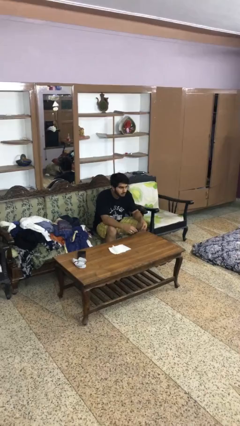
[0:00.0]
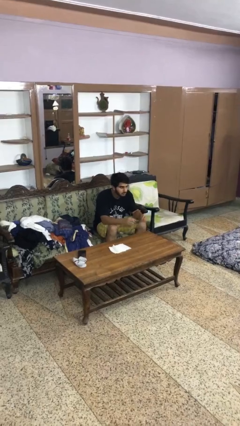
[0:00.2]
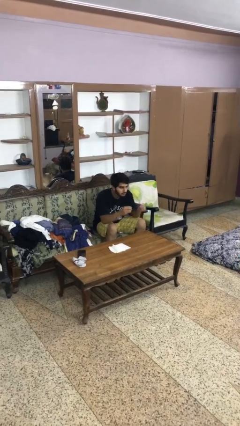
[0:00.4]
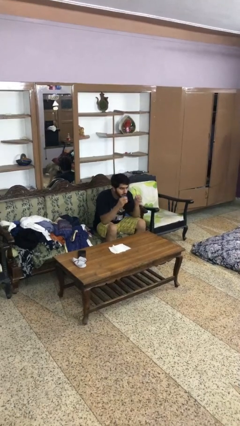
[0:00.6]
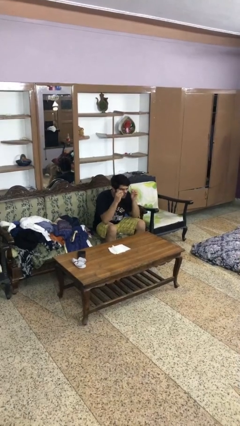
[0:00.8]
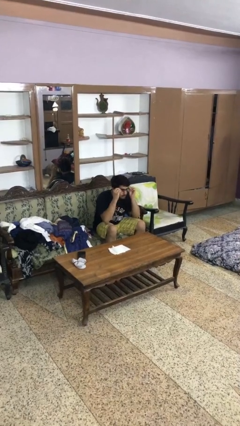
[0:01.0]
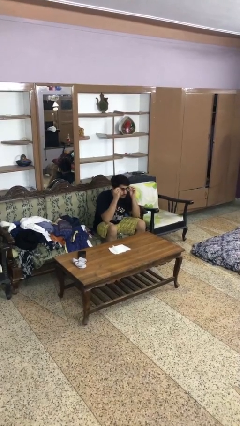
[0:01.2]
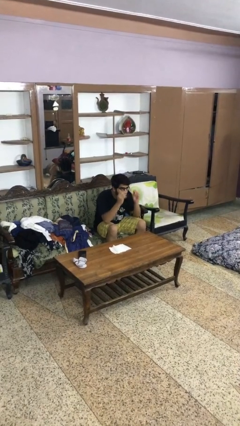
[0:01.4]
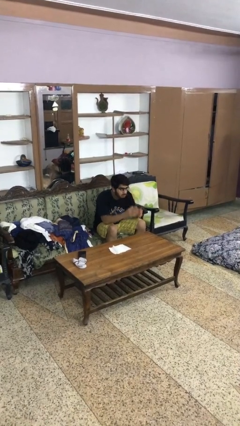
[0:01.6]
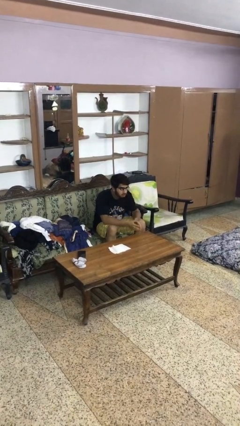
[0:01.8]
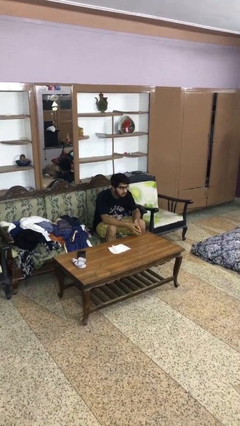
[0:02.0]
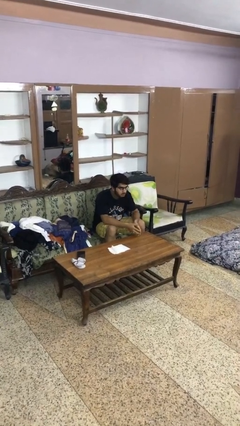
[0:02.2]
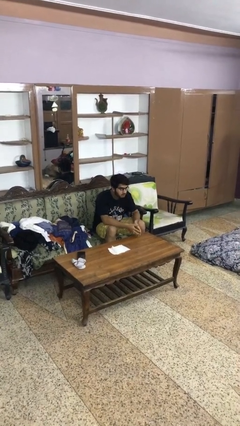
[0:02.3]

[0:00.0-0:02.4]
person puts on glasses

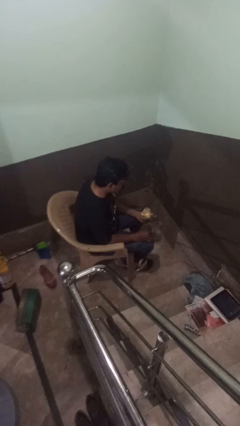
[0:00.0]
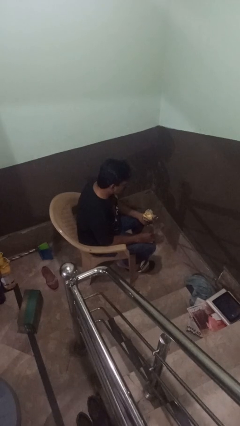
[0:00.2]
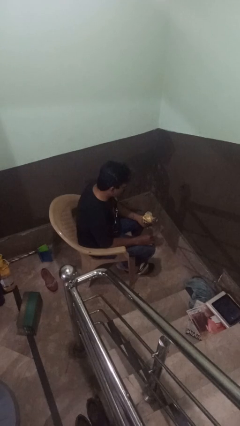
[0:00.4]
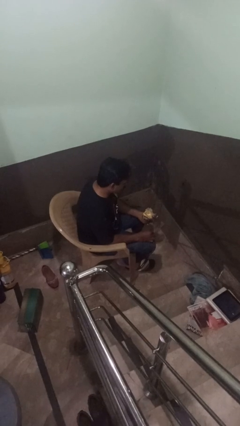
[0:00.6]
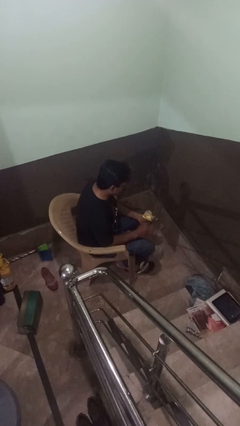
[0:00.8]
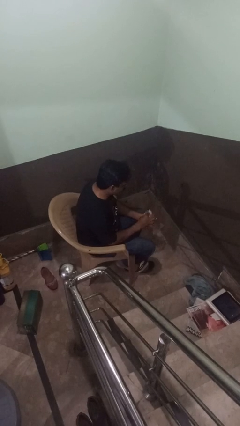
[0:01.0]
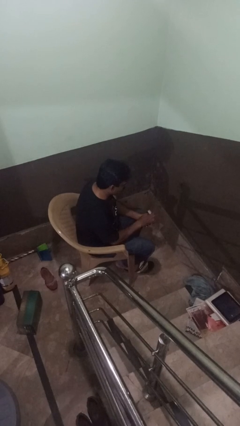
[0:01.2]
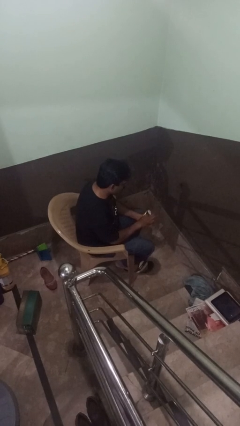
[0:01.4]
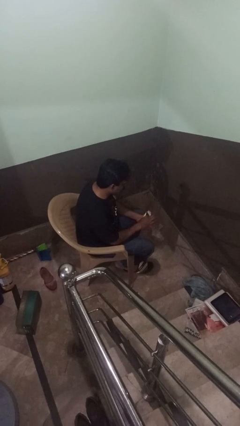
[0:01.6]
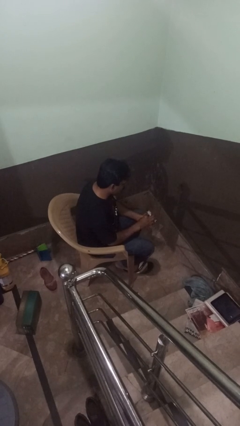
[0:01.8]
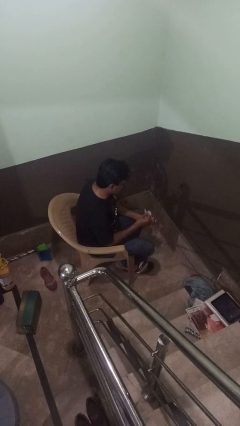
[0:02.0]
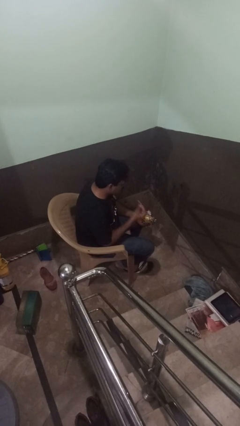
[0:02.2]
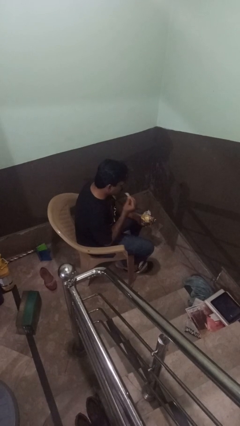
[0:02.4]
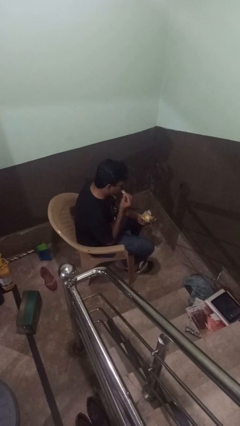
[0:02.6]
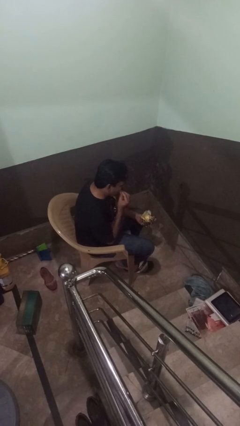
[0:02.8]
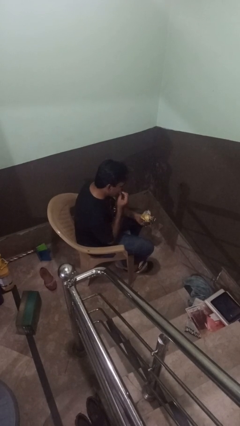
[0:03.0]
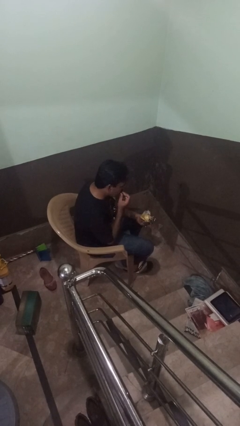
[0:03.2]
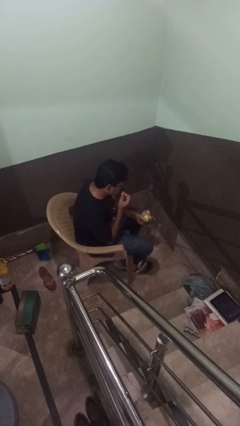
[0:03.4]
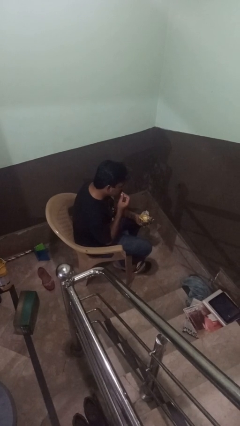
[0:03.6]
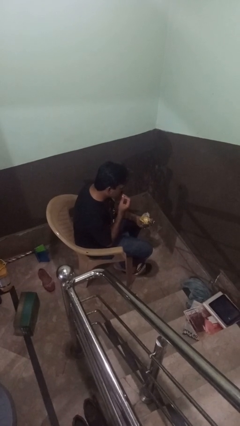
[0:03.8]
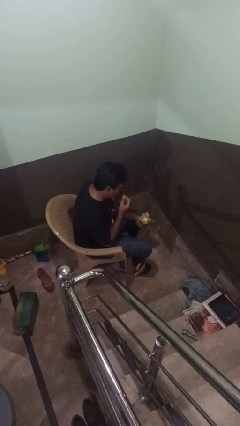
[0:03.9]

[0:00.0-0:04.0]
person eats snack from bag

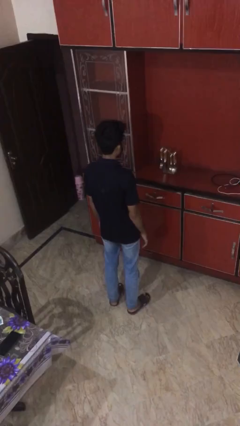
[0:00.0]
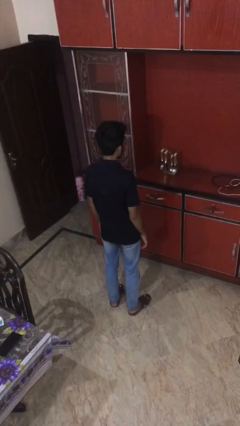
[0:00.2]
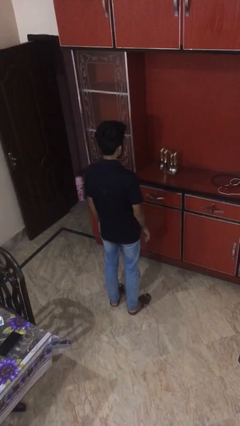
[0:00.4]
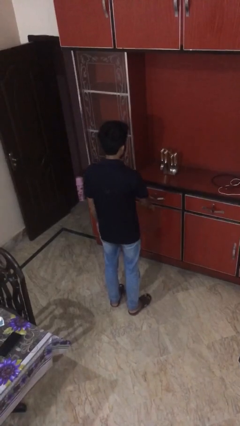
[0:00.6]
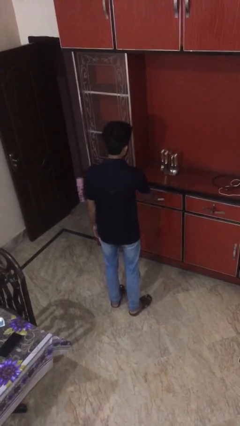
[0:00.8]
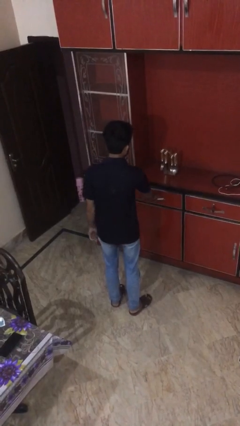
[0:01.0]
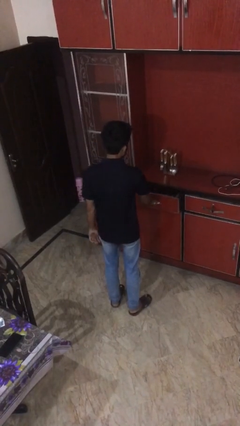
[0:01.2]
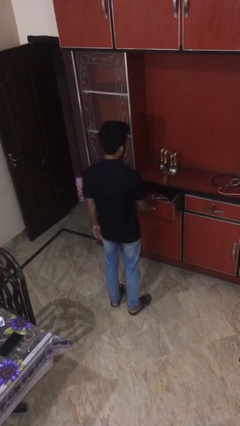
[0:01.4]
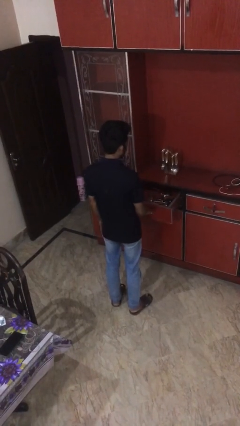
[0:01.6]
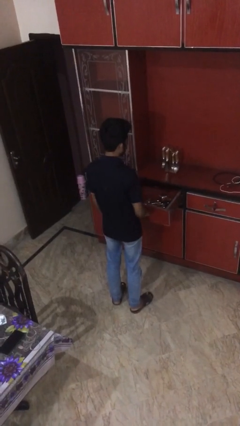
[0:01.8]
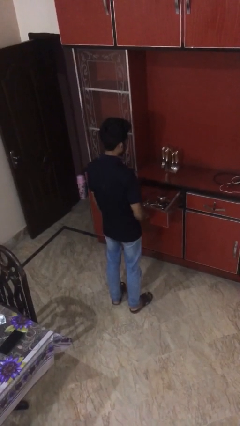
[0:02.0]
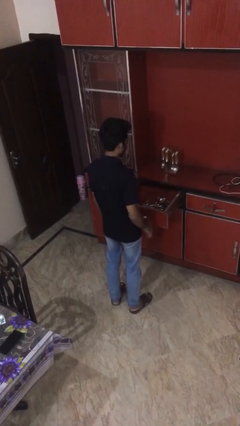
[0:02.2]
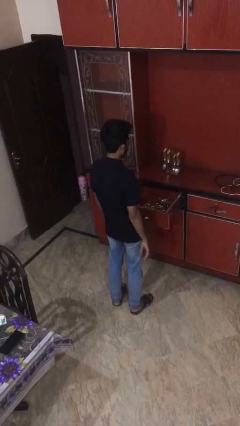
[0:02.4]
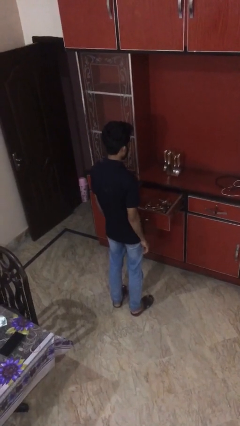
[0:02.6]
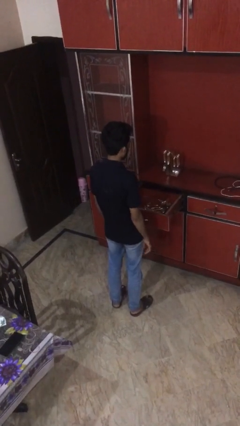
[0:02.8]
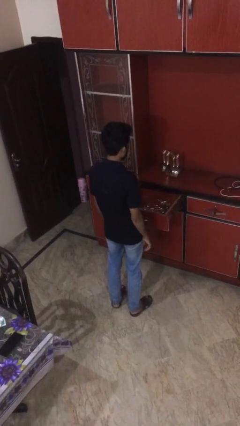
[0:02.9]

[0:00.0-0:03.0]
person opens kitchen drawer
